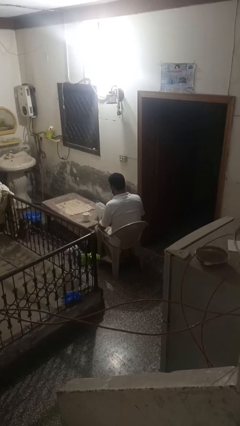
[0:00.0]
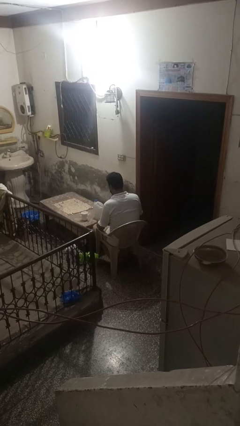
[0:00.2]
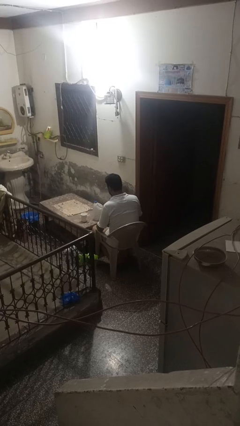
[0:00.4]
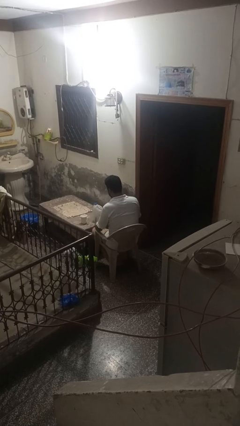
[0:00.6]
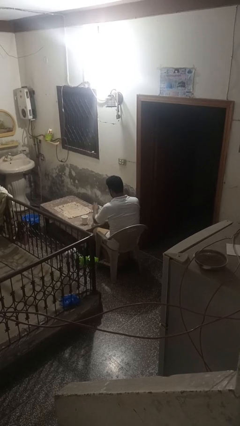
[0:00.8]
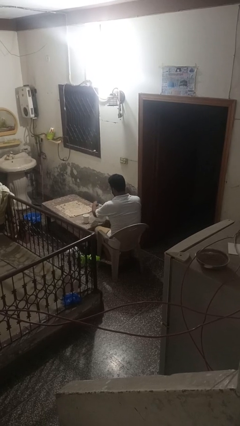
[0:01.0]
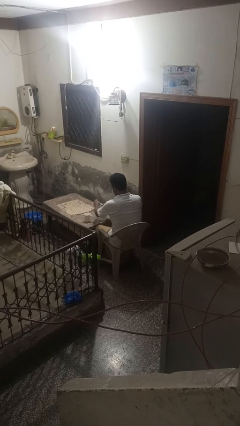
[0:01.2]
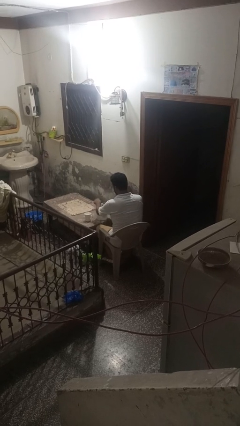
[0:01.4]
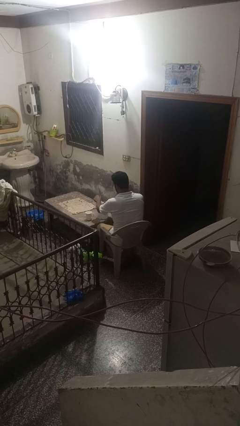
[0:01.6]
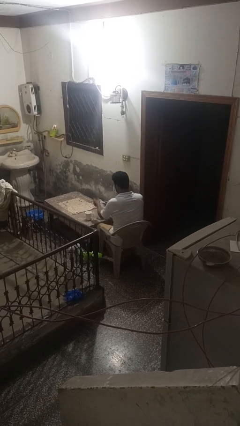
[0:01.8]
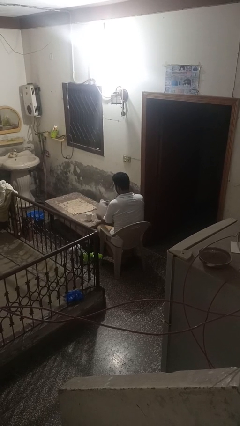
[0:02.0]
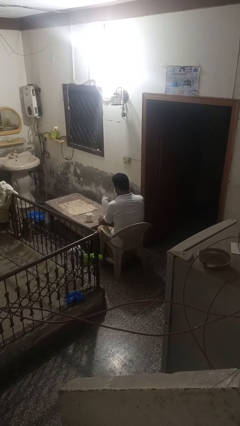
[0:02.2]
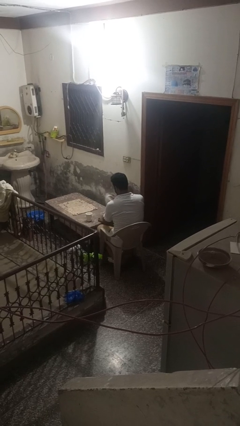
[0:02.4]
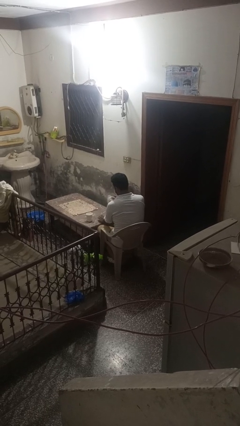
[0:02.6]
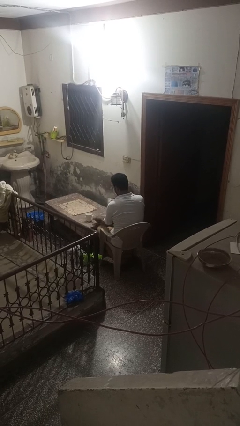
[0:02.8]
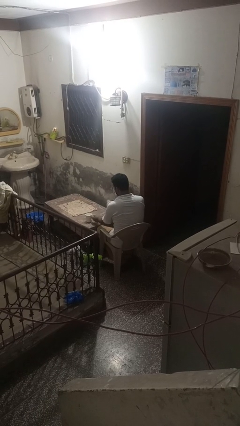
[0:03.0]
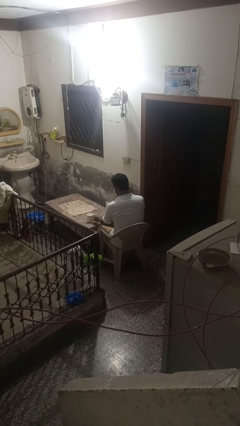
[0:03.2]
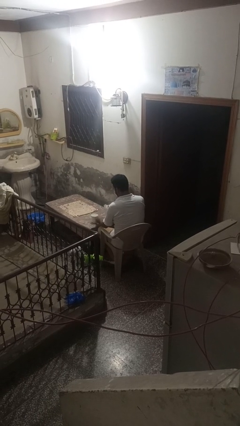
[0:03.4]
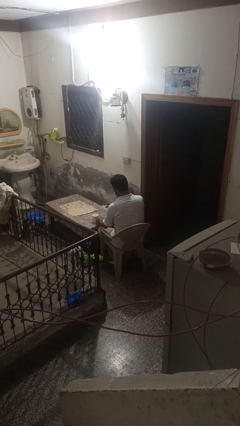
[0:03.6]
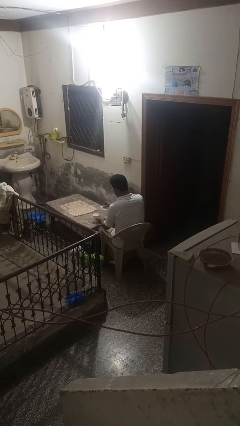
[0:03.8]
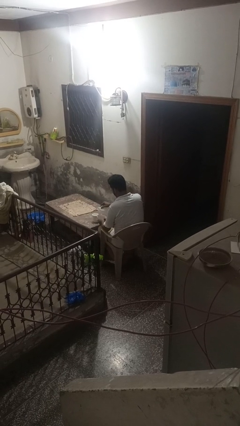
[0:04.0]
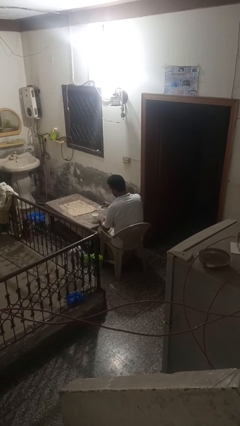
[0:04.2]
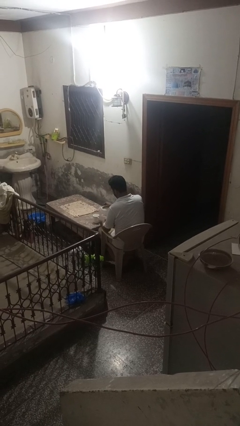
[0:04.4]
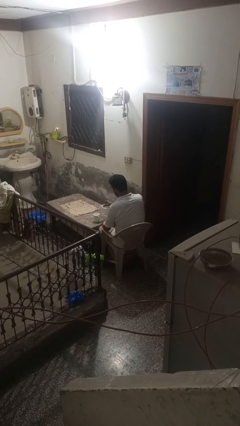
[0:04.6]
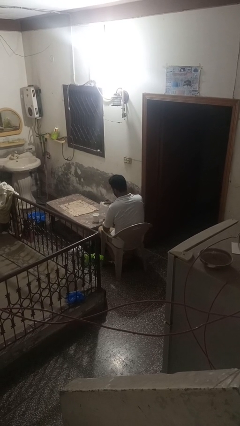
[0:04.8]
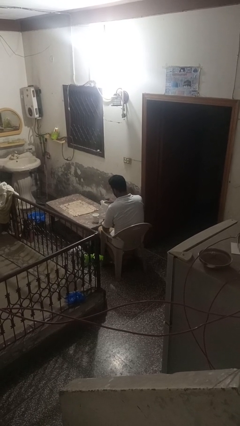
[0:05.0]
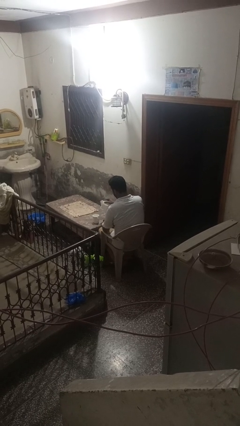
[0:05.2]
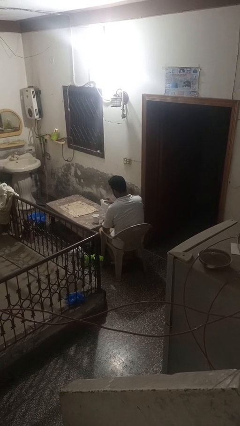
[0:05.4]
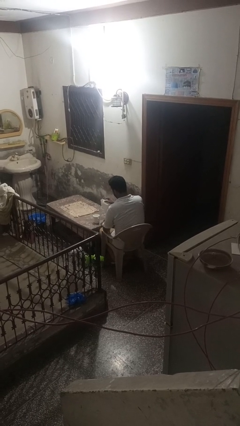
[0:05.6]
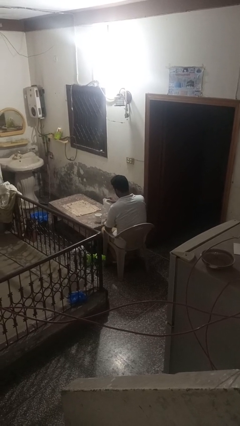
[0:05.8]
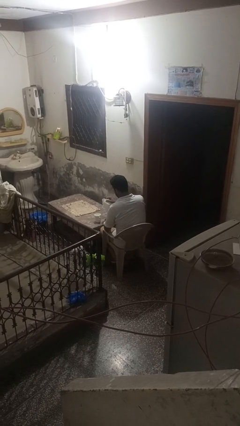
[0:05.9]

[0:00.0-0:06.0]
person unscrews lid from bottle

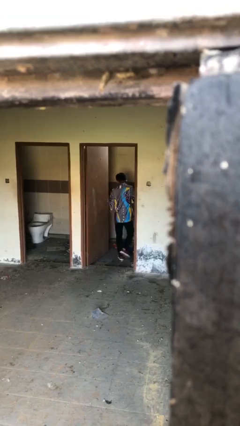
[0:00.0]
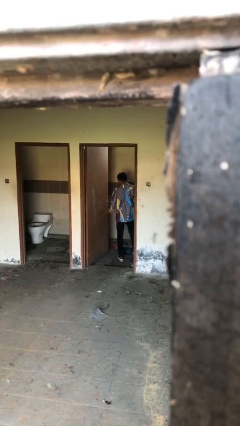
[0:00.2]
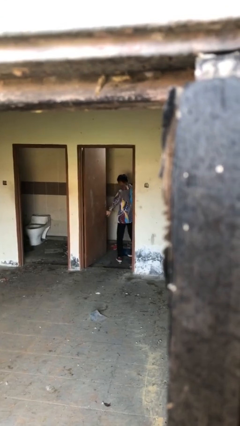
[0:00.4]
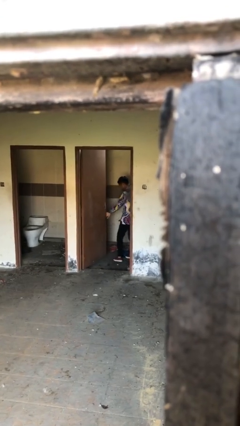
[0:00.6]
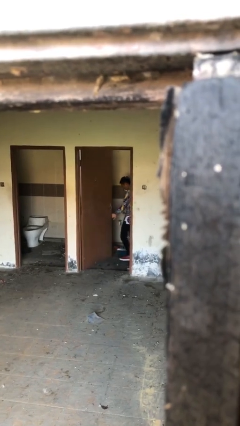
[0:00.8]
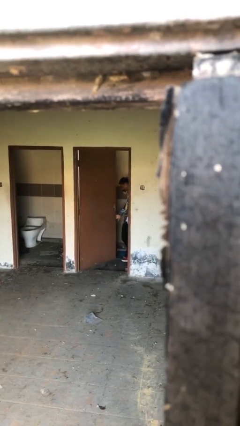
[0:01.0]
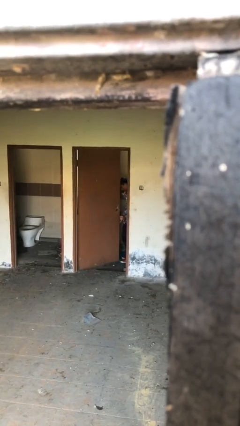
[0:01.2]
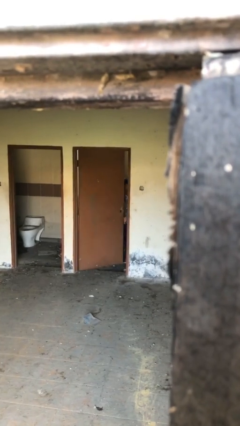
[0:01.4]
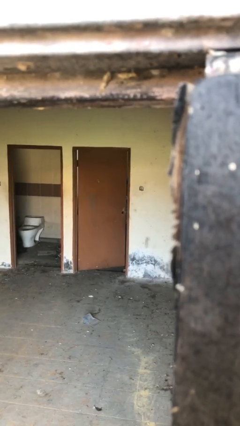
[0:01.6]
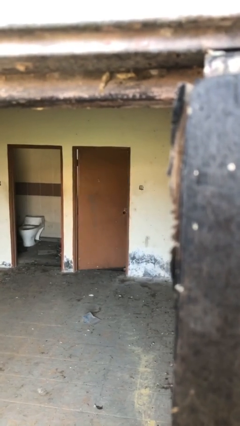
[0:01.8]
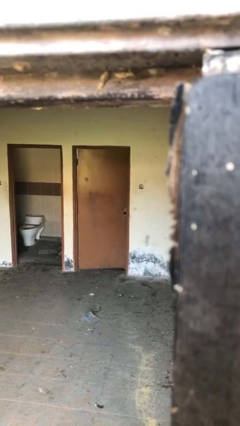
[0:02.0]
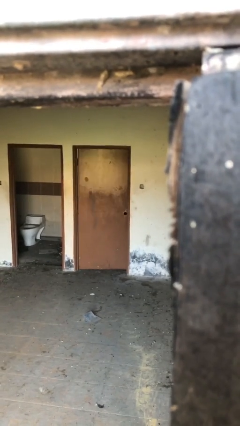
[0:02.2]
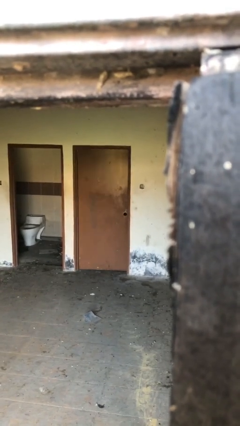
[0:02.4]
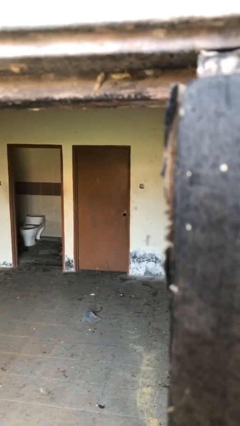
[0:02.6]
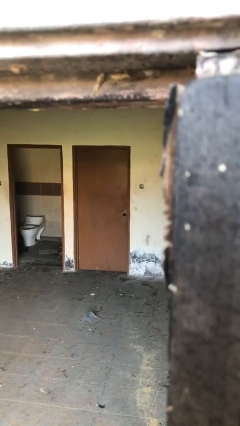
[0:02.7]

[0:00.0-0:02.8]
person closes facility door

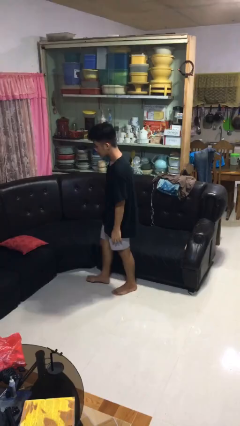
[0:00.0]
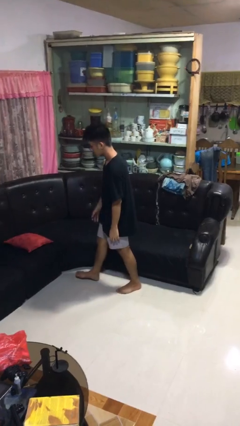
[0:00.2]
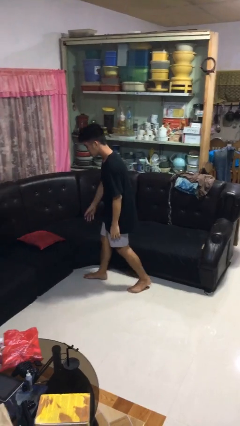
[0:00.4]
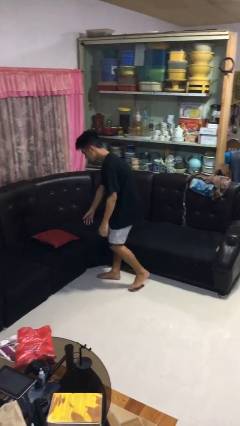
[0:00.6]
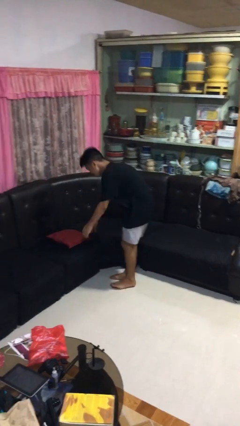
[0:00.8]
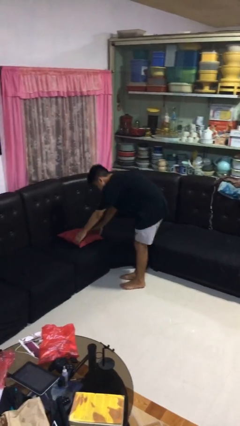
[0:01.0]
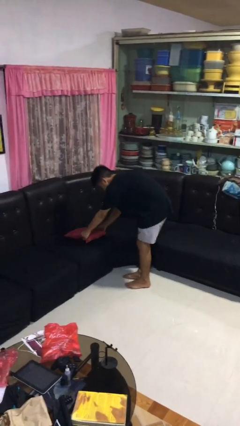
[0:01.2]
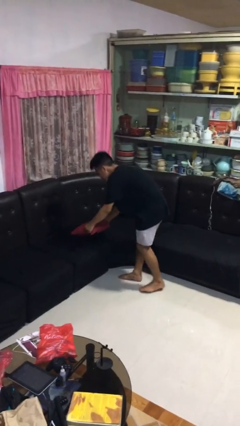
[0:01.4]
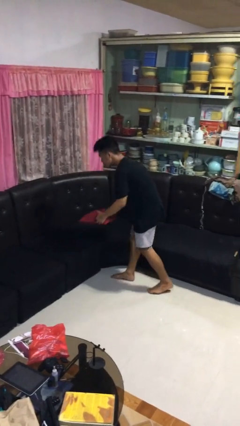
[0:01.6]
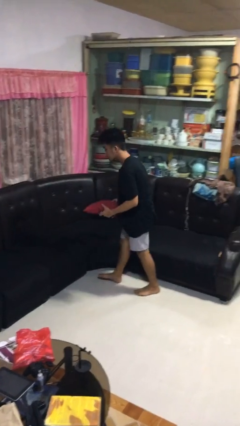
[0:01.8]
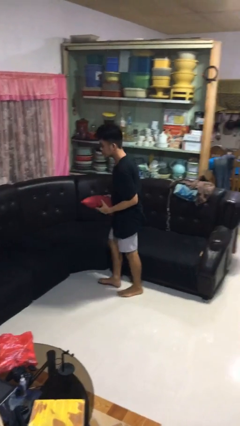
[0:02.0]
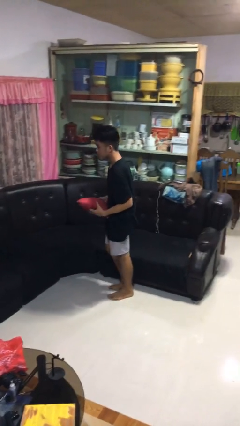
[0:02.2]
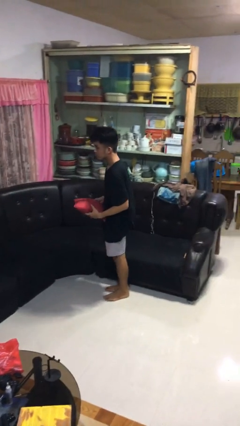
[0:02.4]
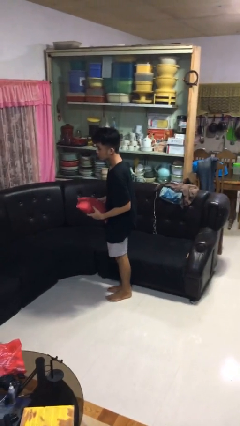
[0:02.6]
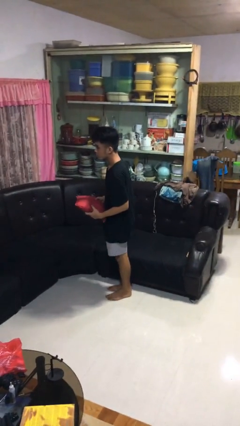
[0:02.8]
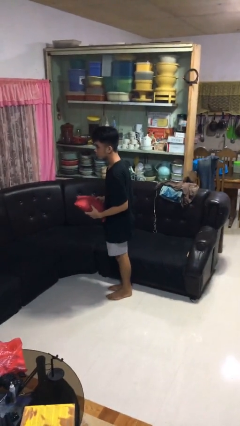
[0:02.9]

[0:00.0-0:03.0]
person picks up object from couch

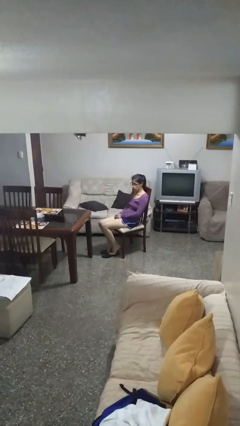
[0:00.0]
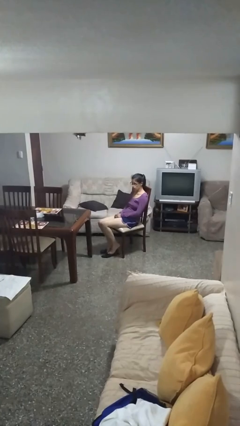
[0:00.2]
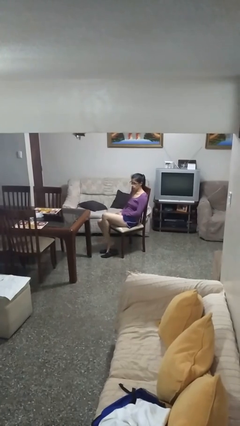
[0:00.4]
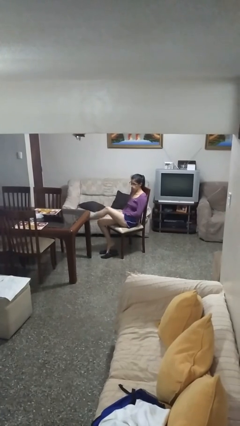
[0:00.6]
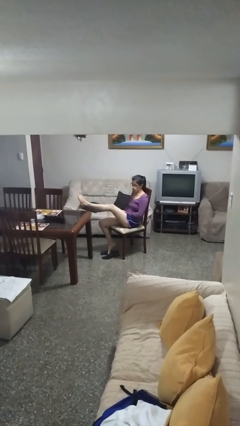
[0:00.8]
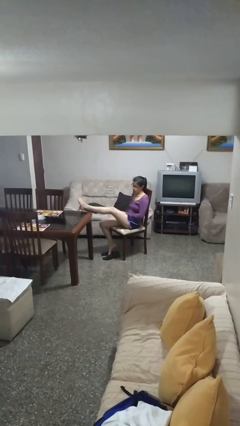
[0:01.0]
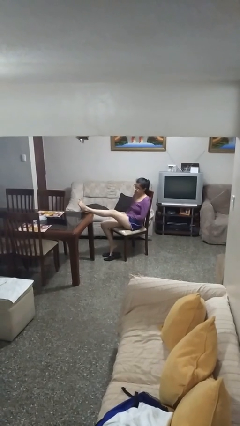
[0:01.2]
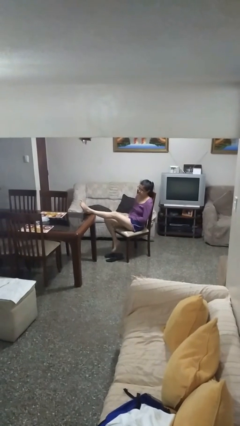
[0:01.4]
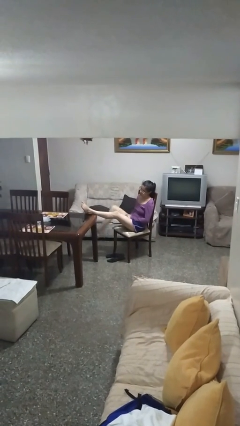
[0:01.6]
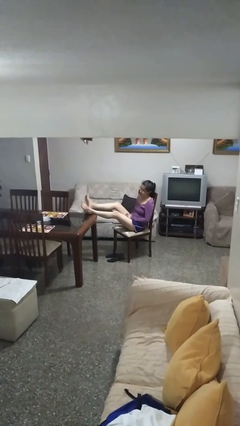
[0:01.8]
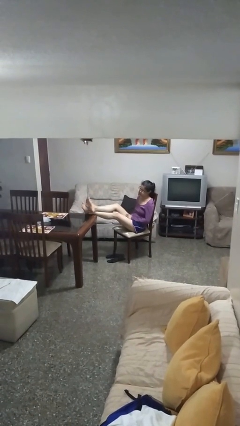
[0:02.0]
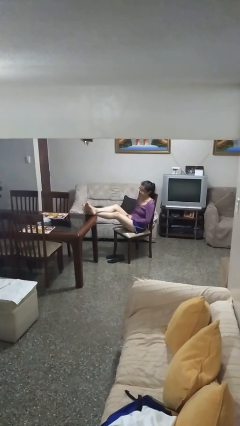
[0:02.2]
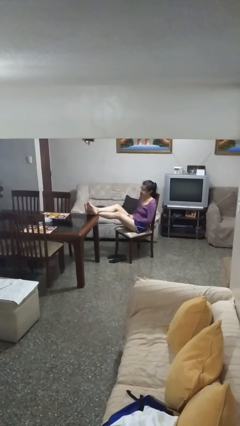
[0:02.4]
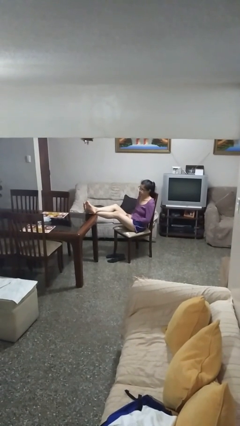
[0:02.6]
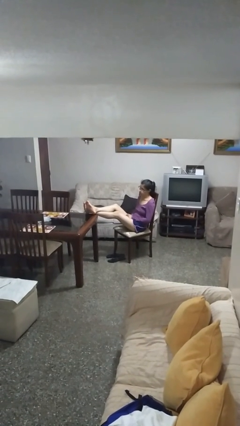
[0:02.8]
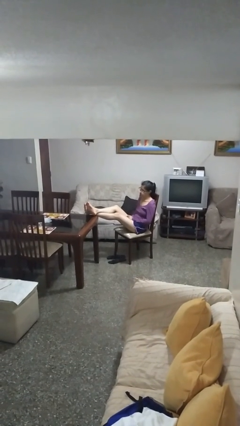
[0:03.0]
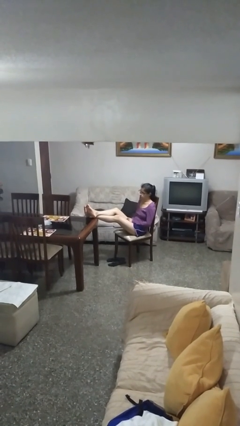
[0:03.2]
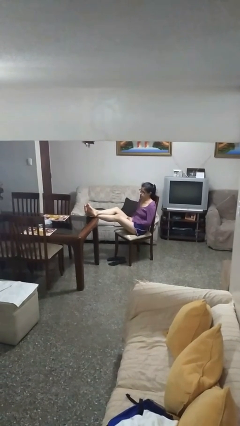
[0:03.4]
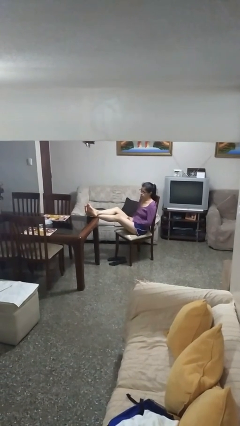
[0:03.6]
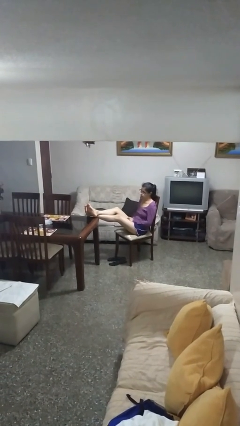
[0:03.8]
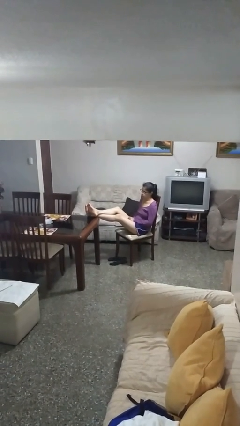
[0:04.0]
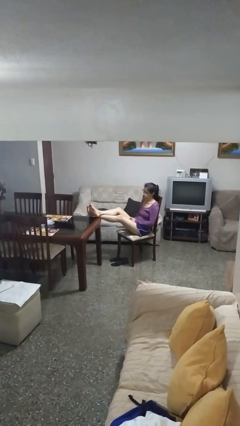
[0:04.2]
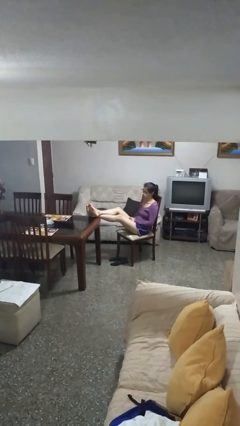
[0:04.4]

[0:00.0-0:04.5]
person puts feet up

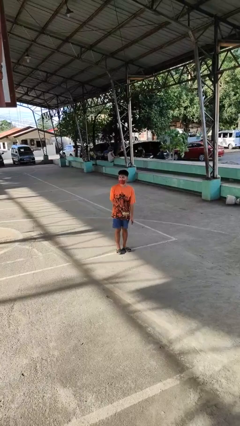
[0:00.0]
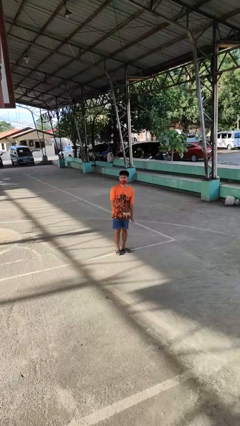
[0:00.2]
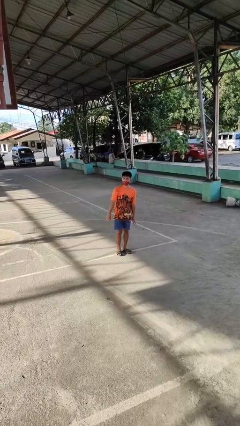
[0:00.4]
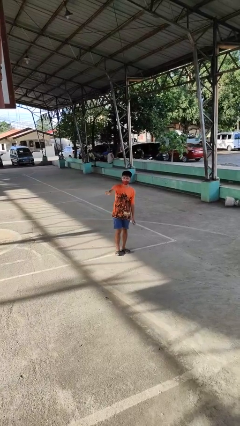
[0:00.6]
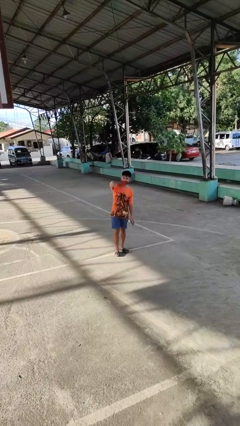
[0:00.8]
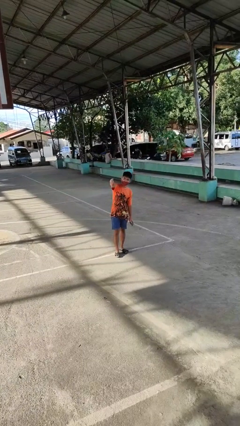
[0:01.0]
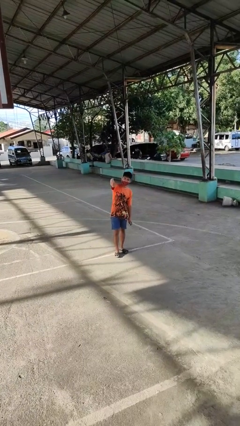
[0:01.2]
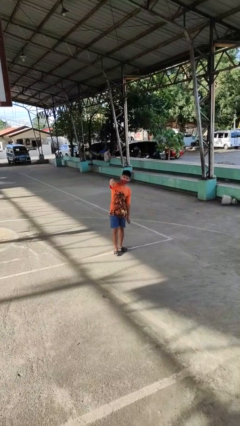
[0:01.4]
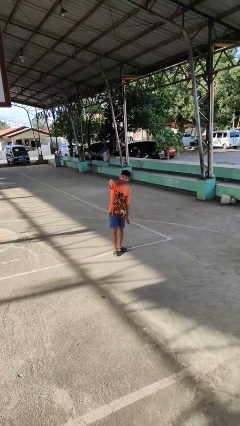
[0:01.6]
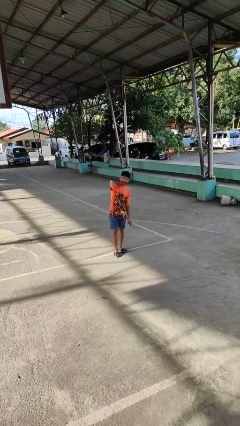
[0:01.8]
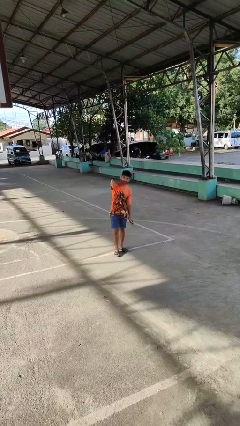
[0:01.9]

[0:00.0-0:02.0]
person gestures thumbs down
